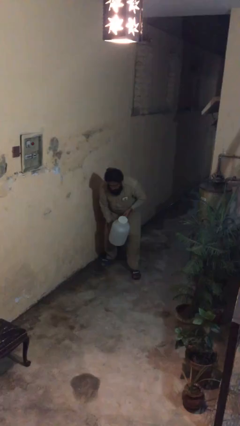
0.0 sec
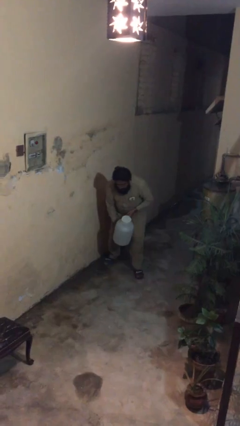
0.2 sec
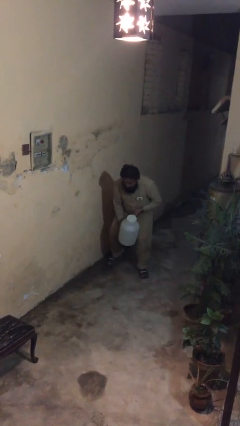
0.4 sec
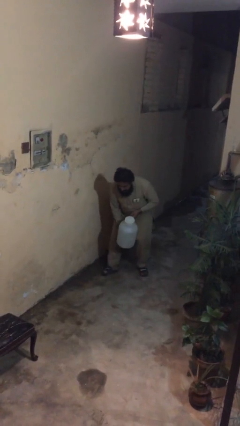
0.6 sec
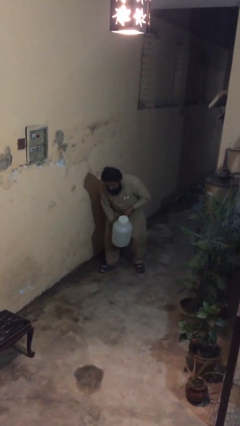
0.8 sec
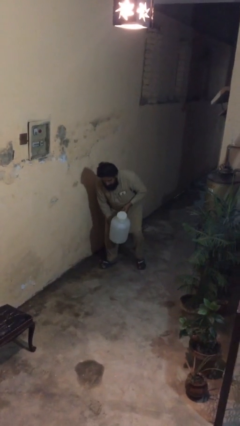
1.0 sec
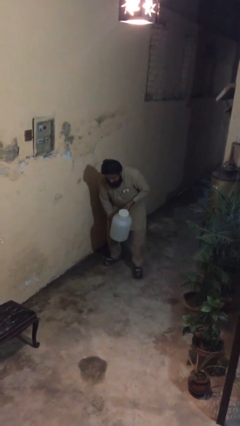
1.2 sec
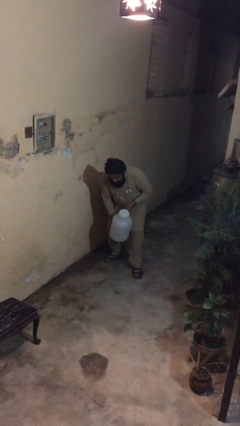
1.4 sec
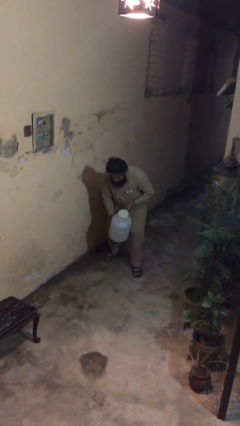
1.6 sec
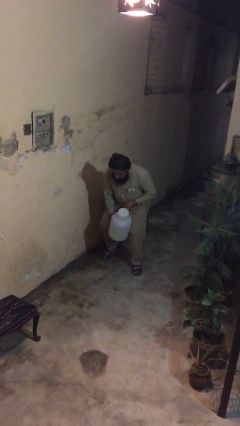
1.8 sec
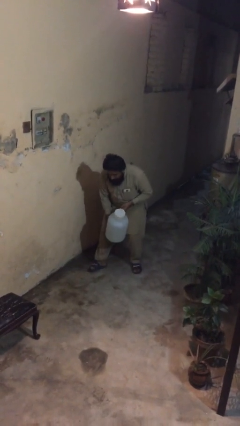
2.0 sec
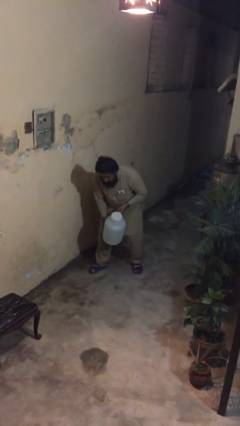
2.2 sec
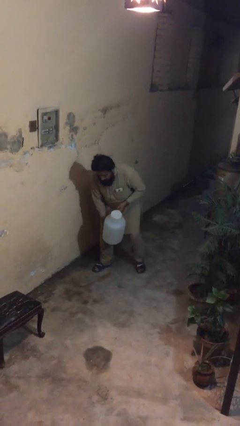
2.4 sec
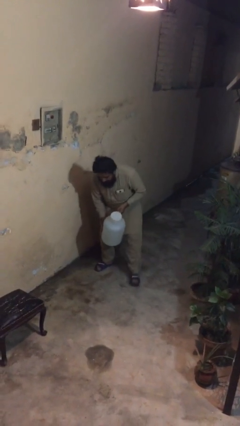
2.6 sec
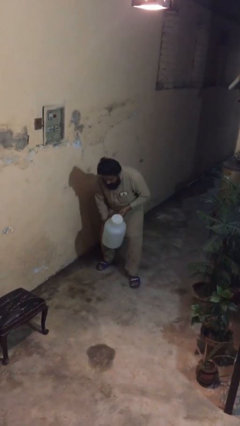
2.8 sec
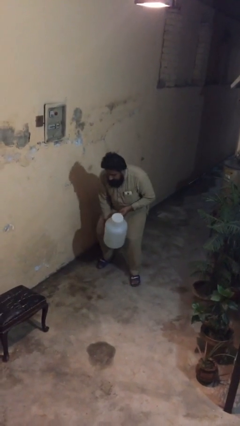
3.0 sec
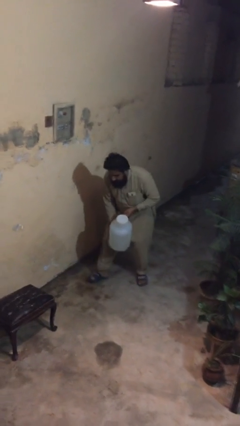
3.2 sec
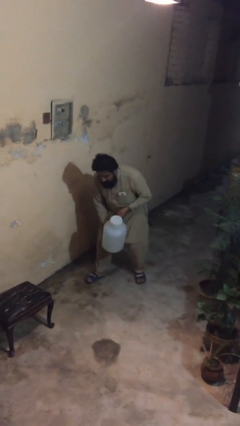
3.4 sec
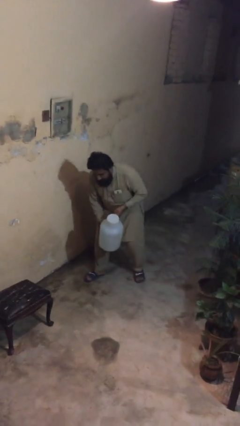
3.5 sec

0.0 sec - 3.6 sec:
person carries heavy object

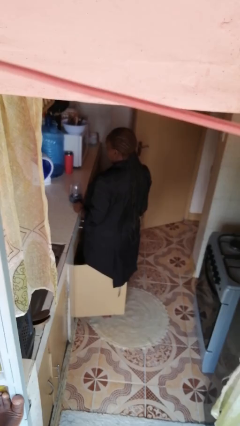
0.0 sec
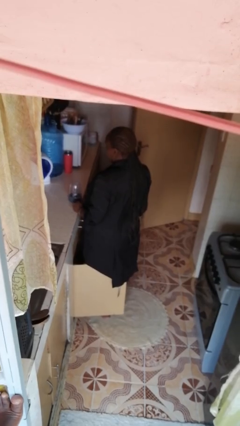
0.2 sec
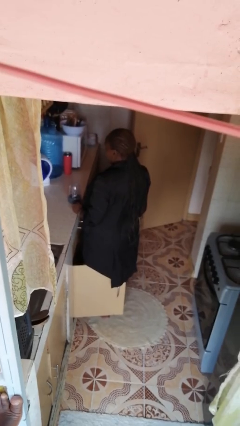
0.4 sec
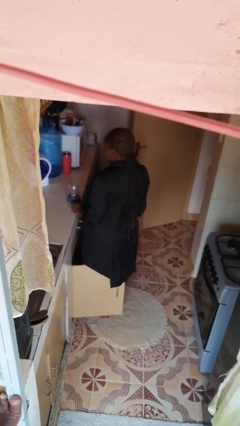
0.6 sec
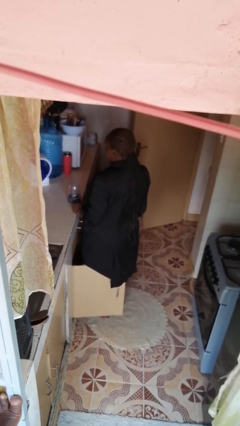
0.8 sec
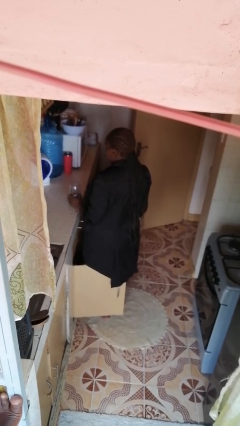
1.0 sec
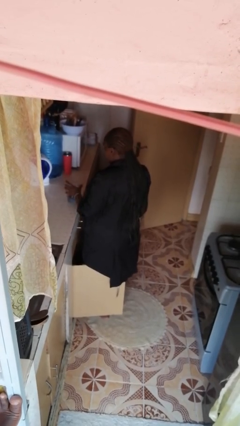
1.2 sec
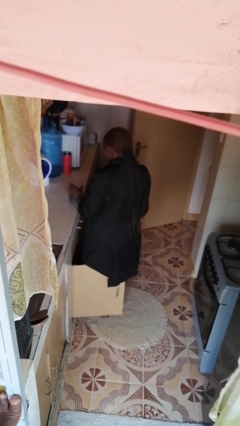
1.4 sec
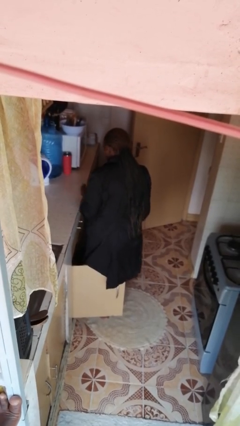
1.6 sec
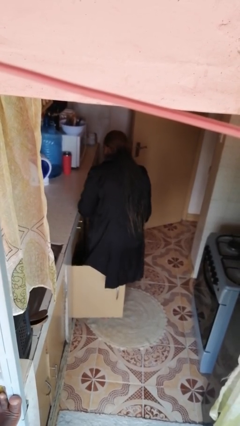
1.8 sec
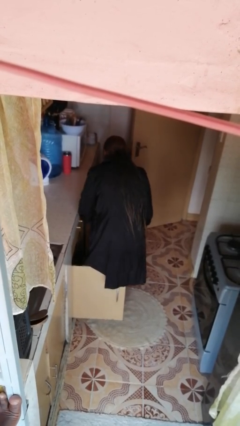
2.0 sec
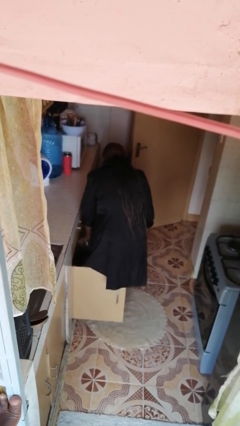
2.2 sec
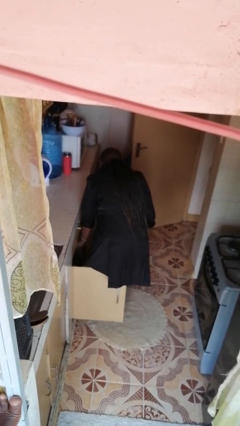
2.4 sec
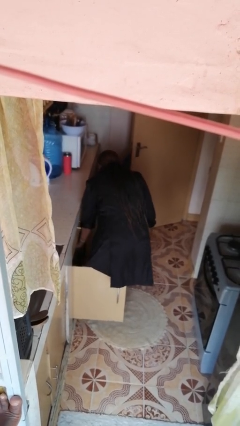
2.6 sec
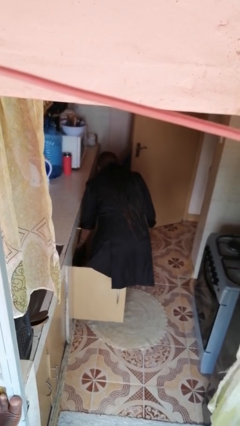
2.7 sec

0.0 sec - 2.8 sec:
person puts object in cabinet

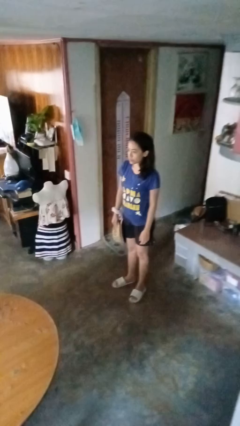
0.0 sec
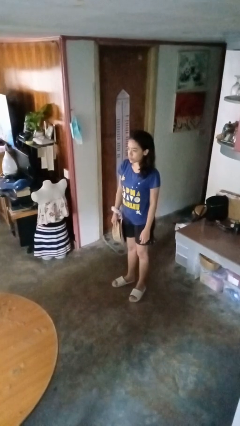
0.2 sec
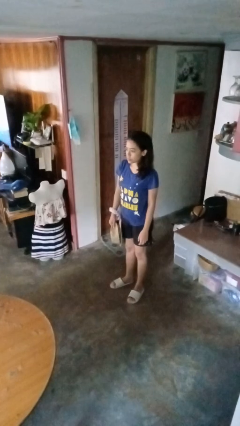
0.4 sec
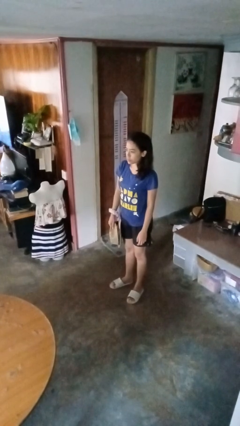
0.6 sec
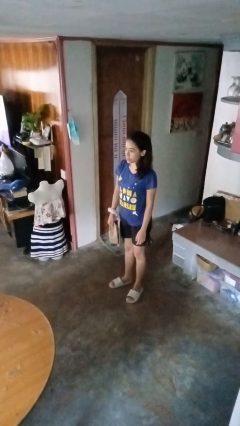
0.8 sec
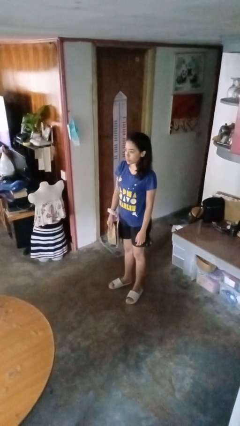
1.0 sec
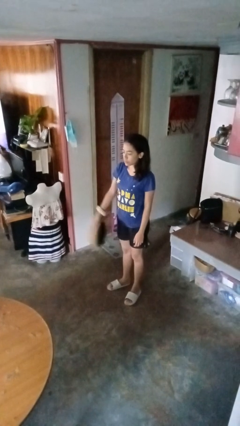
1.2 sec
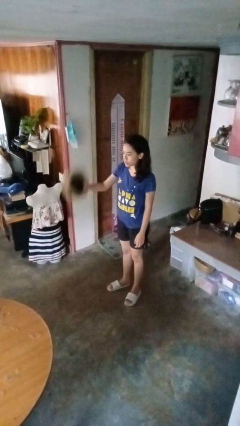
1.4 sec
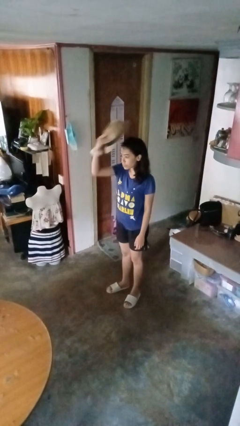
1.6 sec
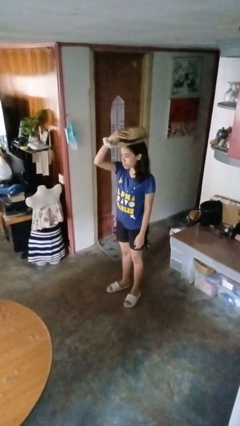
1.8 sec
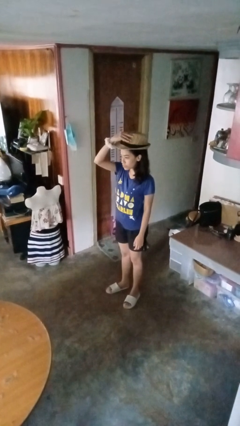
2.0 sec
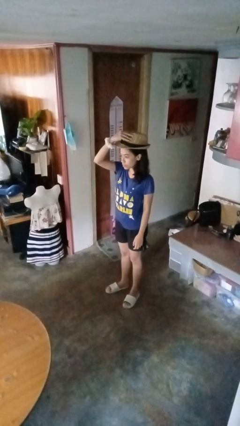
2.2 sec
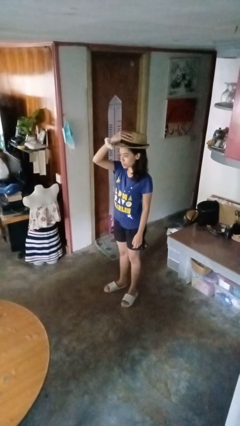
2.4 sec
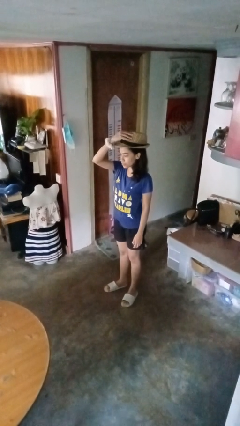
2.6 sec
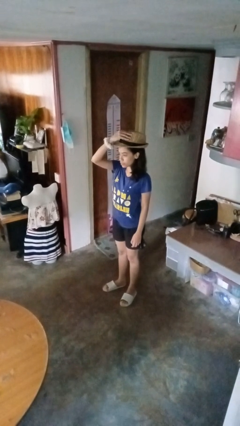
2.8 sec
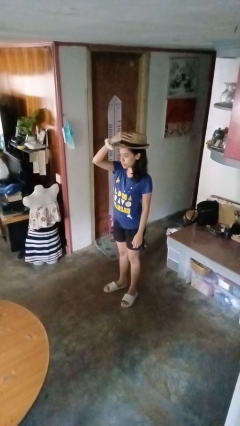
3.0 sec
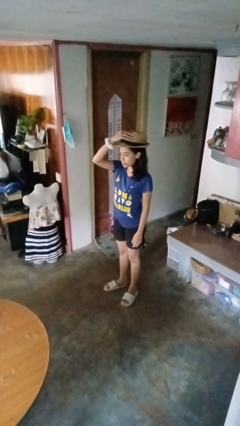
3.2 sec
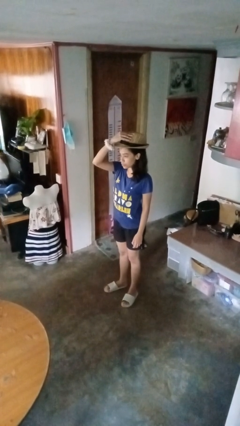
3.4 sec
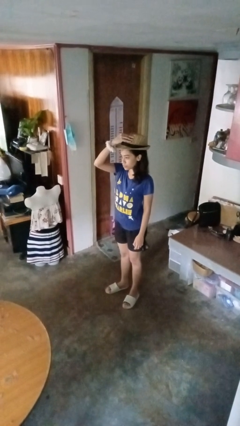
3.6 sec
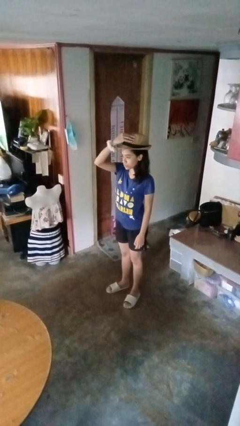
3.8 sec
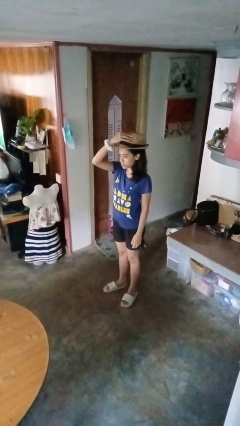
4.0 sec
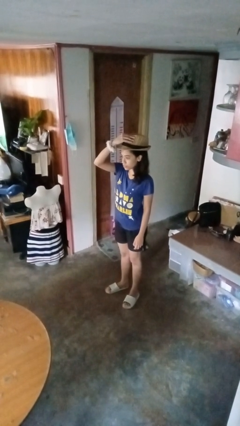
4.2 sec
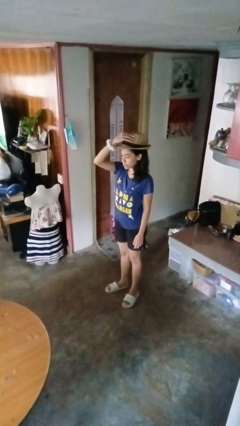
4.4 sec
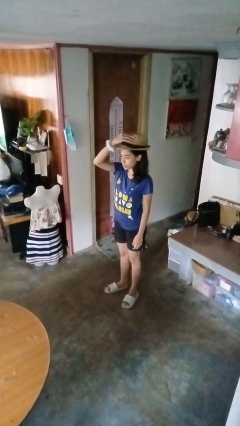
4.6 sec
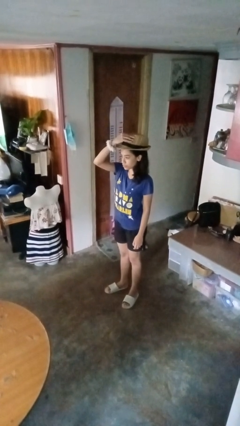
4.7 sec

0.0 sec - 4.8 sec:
person puts on hat

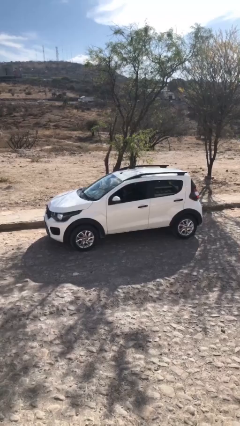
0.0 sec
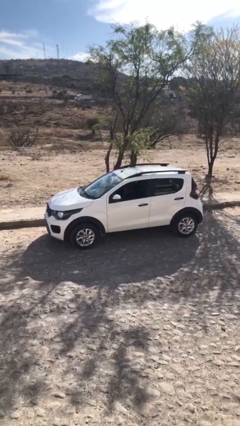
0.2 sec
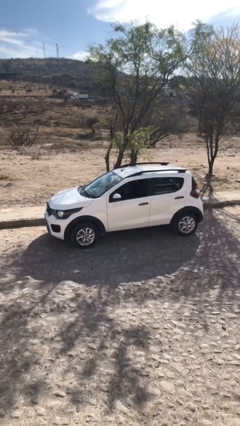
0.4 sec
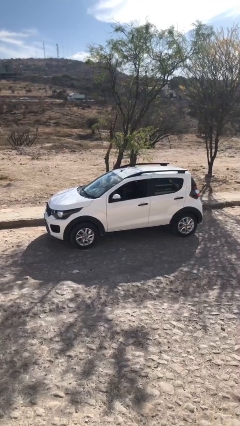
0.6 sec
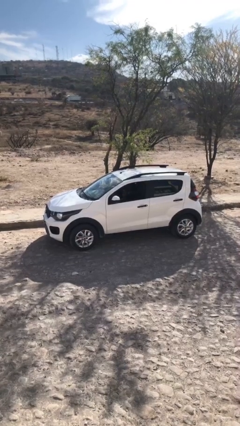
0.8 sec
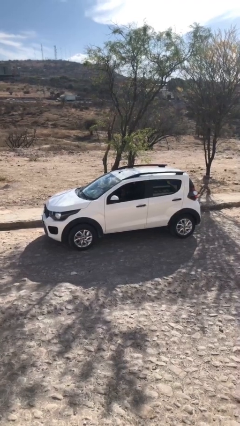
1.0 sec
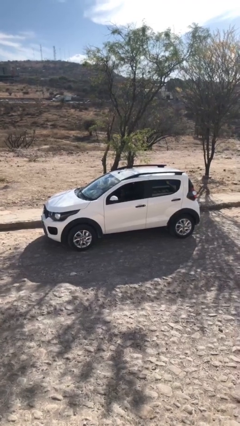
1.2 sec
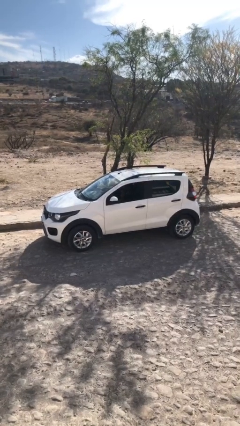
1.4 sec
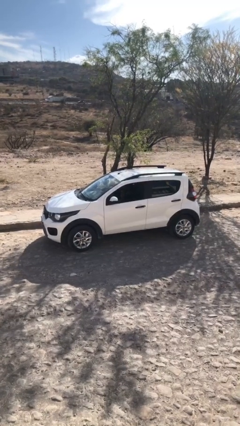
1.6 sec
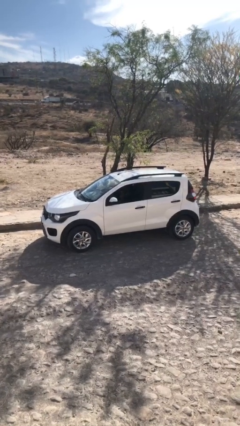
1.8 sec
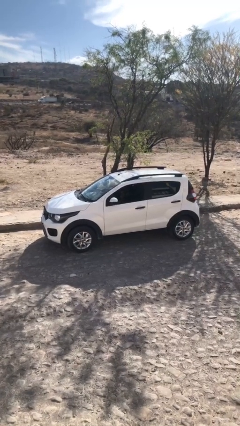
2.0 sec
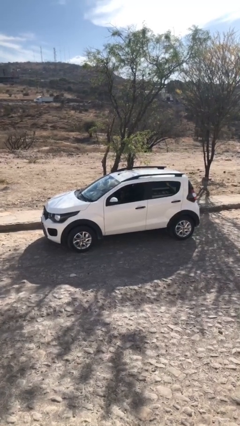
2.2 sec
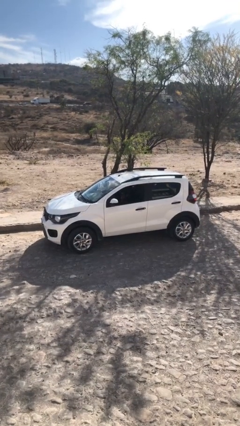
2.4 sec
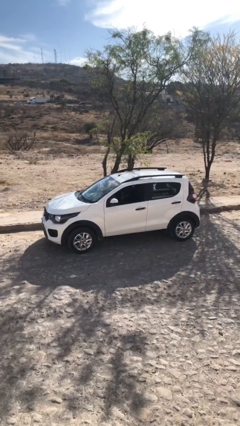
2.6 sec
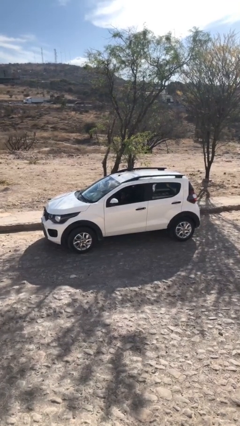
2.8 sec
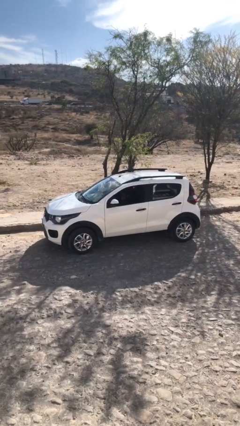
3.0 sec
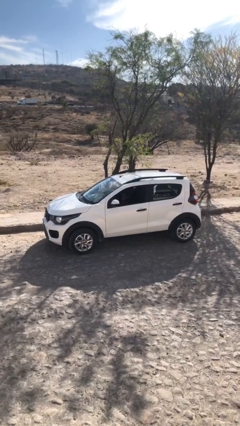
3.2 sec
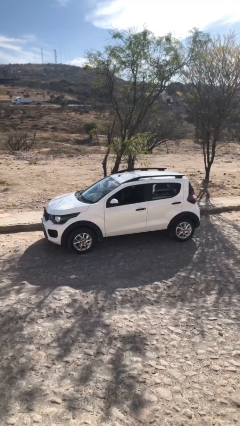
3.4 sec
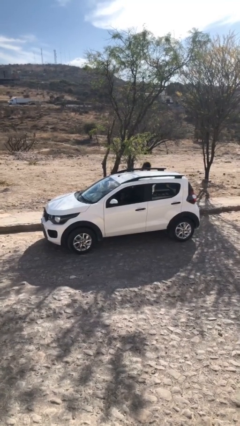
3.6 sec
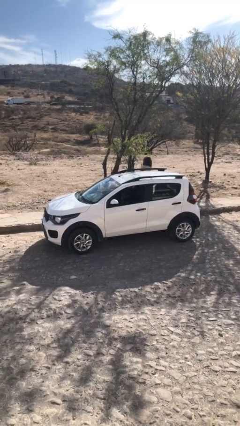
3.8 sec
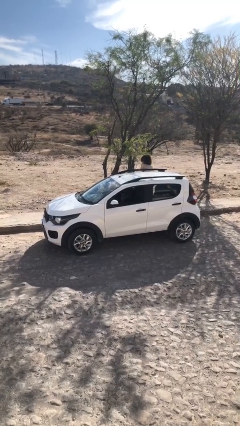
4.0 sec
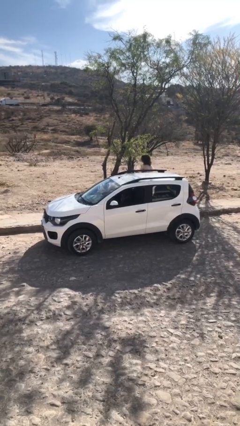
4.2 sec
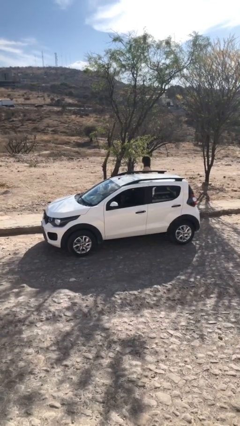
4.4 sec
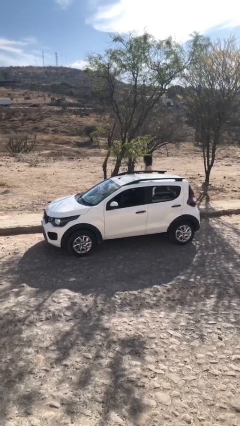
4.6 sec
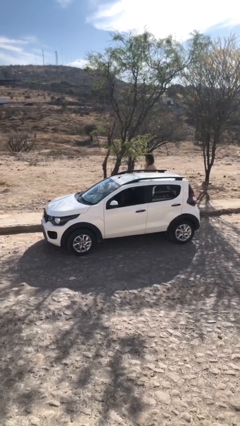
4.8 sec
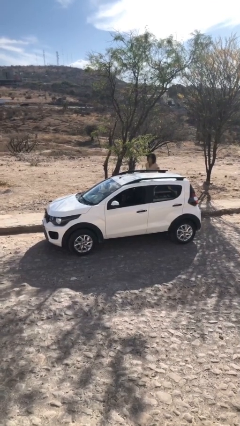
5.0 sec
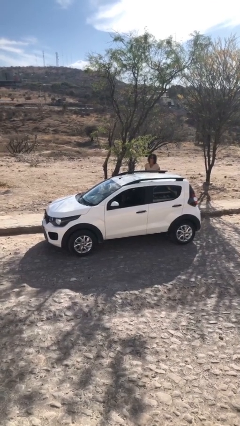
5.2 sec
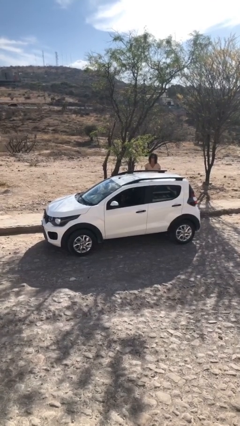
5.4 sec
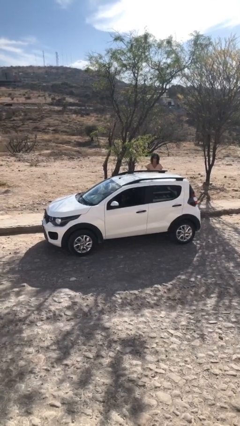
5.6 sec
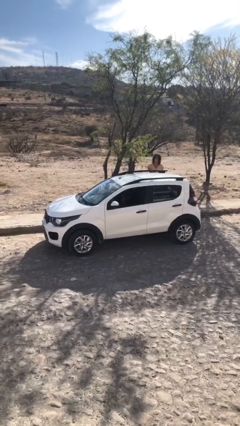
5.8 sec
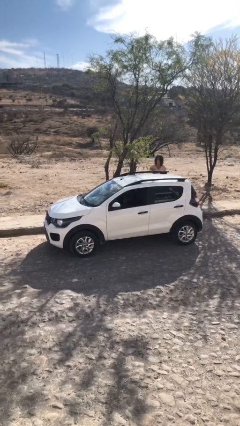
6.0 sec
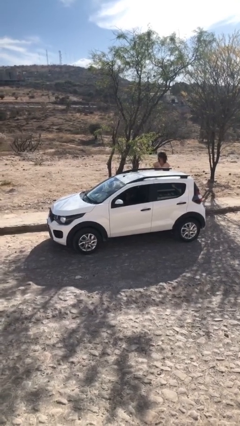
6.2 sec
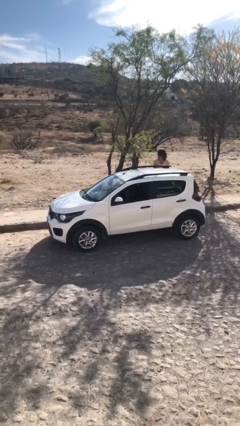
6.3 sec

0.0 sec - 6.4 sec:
car drops off person

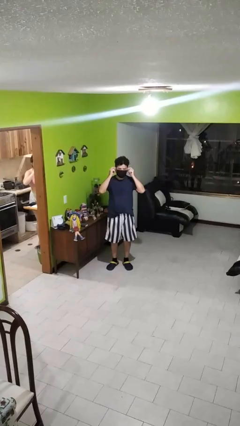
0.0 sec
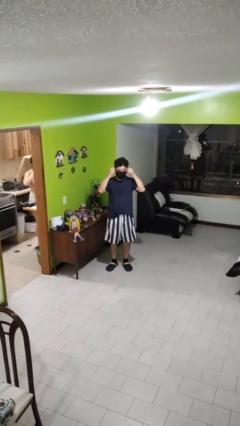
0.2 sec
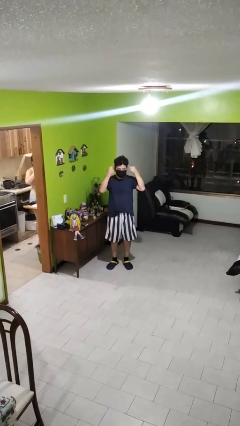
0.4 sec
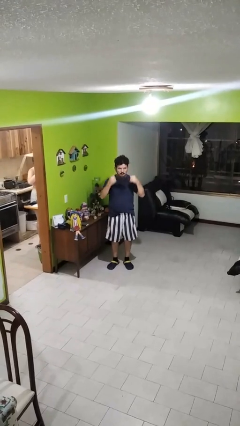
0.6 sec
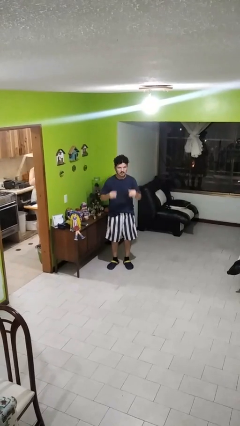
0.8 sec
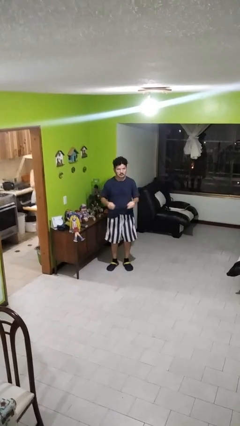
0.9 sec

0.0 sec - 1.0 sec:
person takes off facemask
